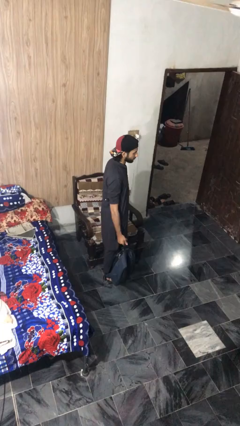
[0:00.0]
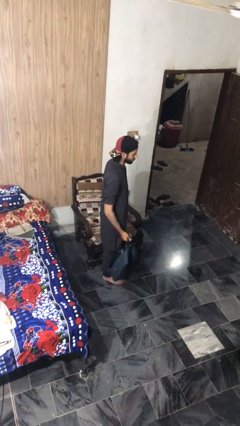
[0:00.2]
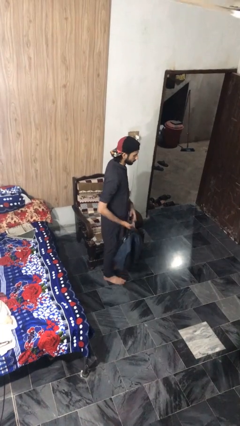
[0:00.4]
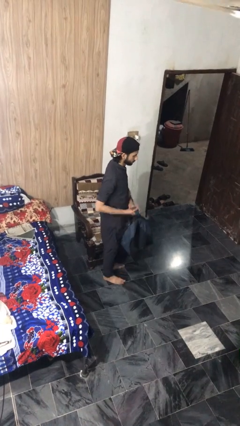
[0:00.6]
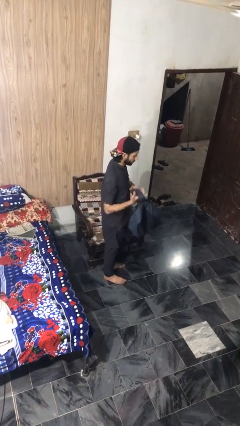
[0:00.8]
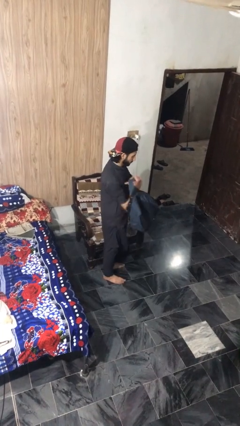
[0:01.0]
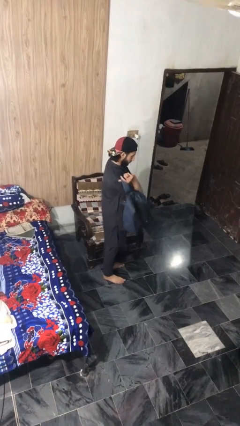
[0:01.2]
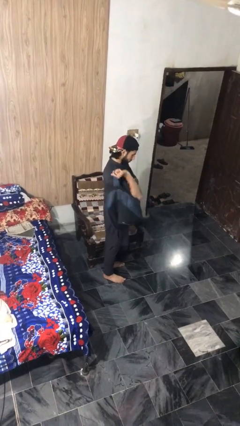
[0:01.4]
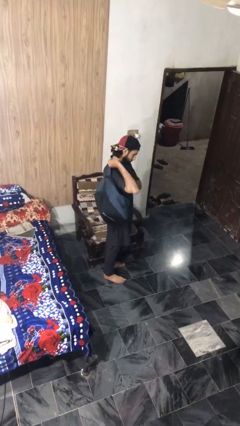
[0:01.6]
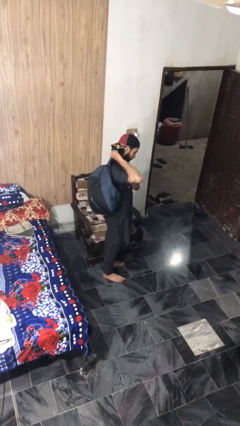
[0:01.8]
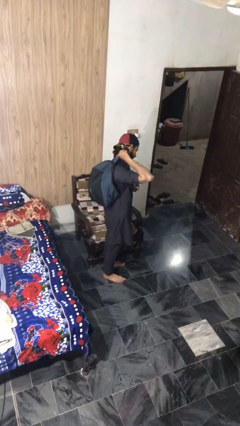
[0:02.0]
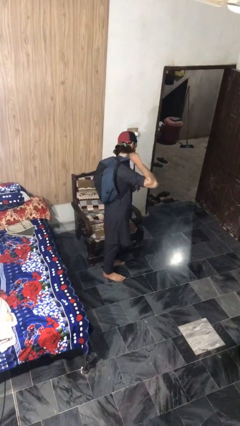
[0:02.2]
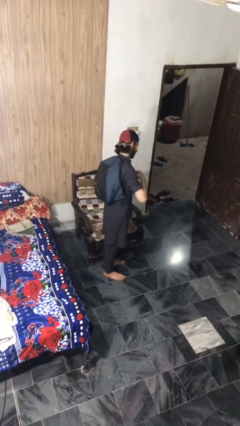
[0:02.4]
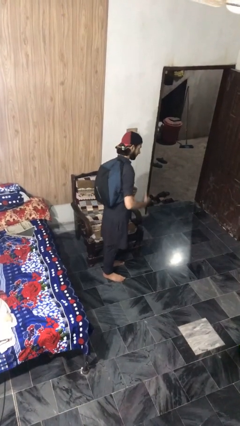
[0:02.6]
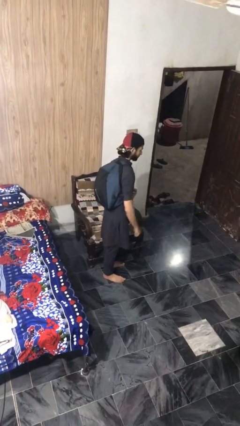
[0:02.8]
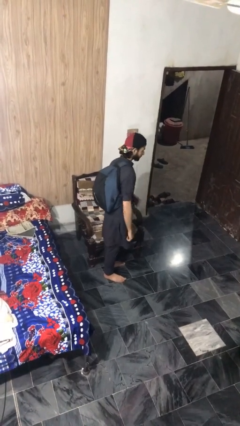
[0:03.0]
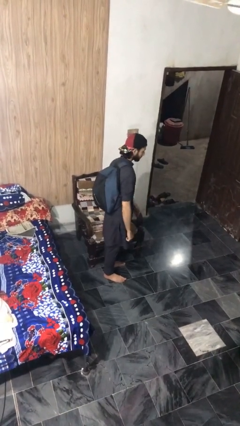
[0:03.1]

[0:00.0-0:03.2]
person puts on backpack

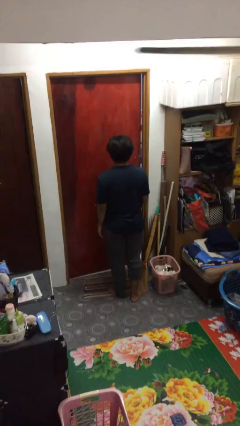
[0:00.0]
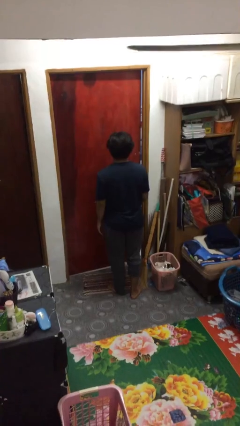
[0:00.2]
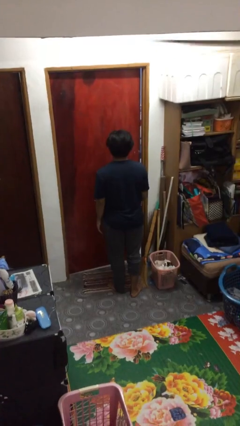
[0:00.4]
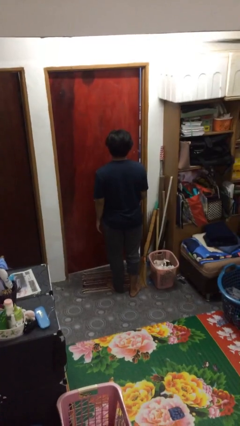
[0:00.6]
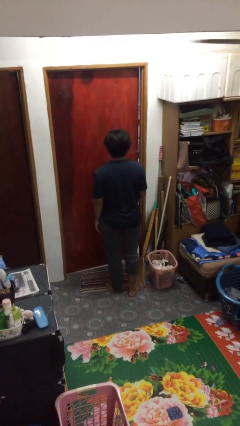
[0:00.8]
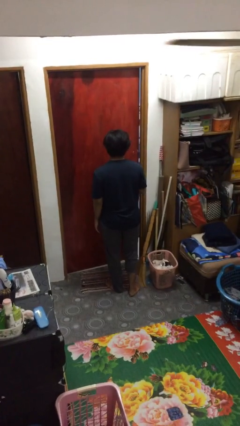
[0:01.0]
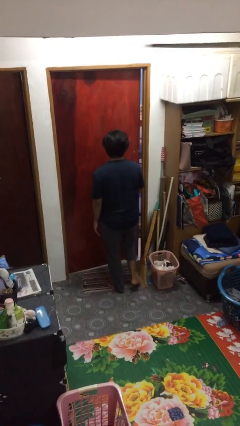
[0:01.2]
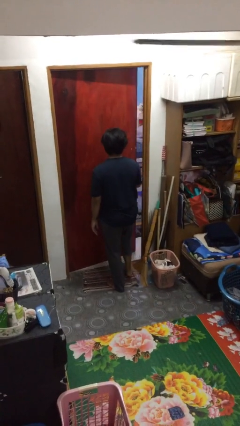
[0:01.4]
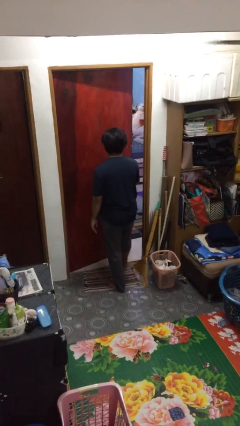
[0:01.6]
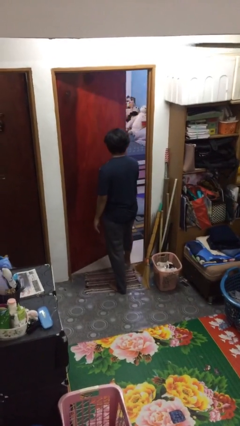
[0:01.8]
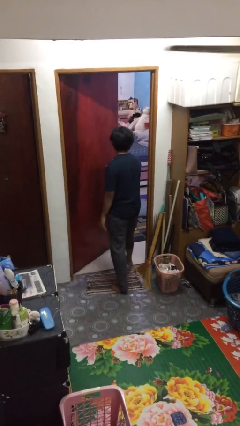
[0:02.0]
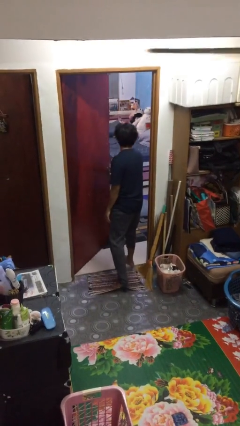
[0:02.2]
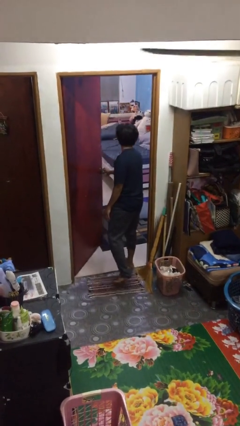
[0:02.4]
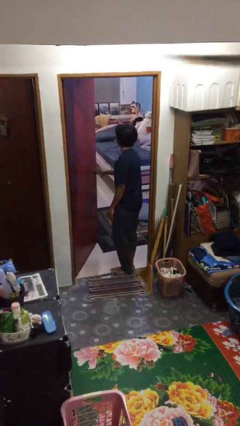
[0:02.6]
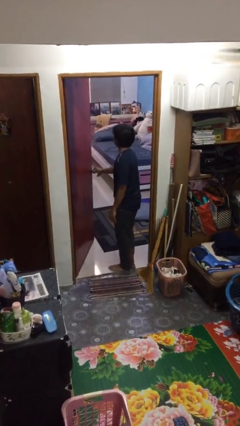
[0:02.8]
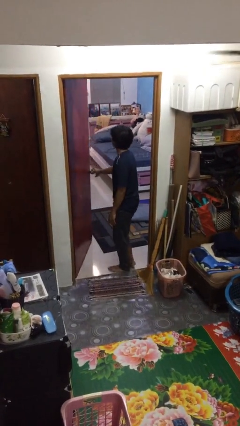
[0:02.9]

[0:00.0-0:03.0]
person opens facility door

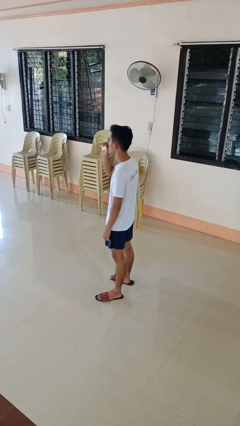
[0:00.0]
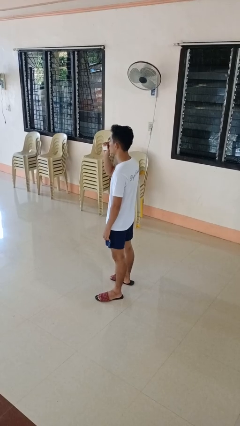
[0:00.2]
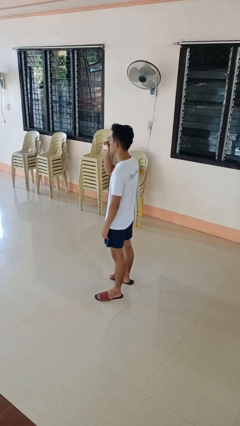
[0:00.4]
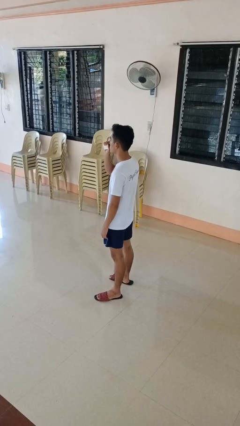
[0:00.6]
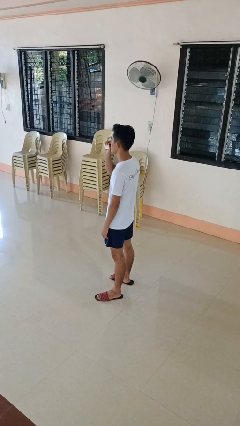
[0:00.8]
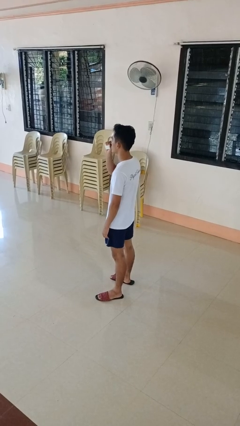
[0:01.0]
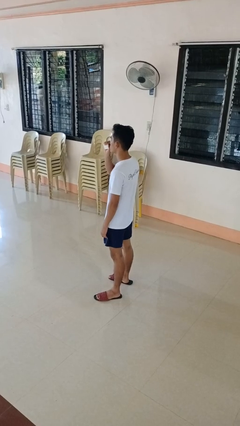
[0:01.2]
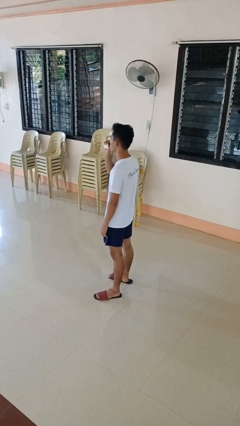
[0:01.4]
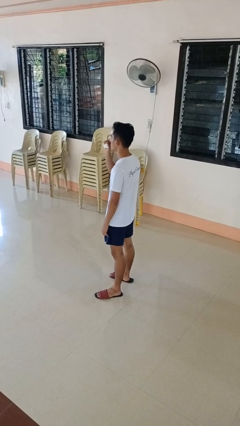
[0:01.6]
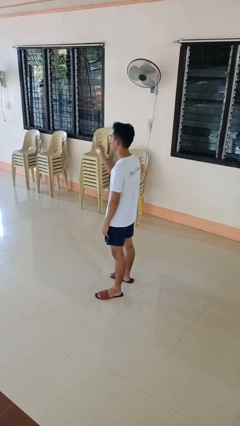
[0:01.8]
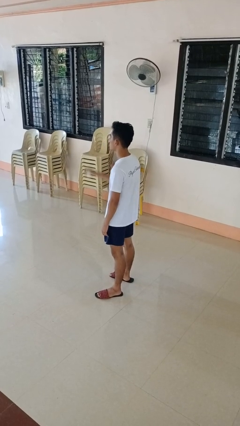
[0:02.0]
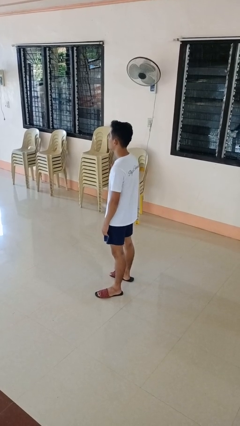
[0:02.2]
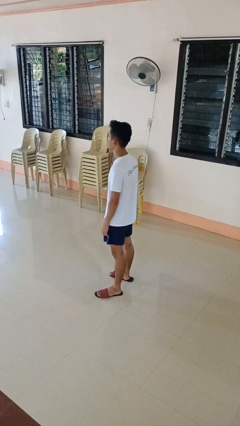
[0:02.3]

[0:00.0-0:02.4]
person vapes

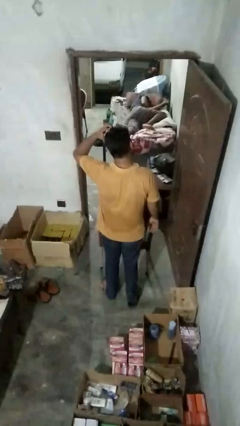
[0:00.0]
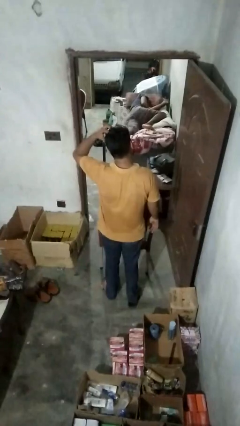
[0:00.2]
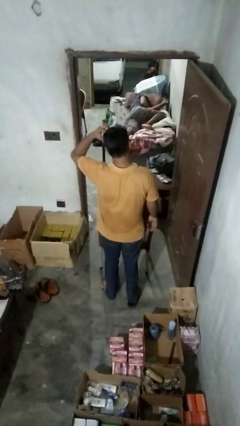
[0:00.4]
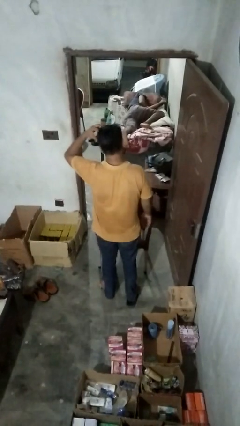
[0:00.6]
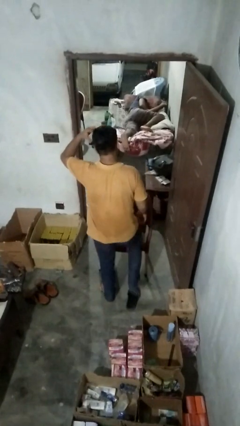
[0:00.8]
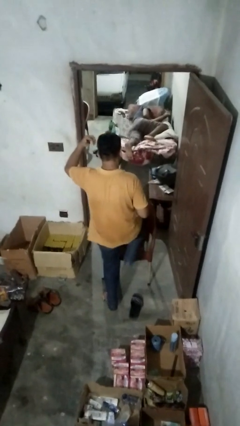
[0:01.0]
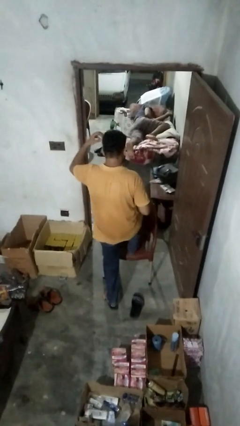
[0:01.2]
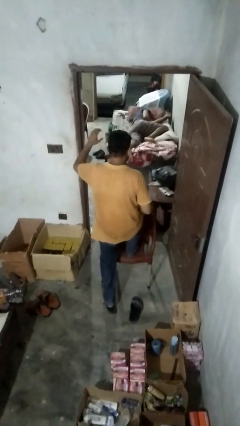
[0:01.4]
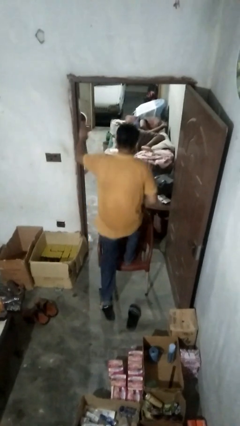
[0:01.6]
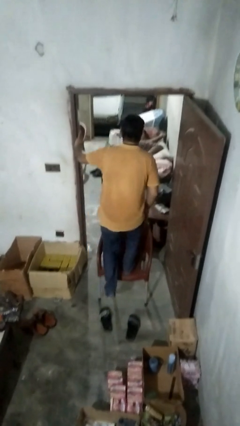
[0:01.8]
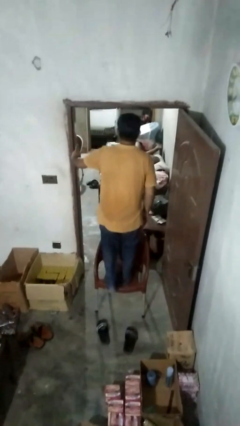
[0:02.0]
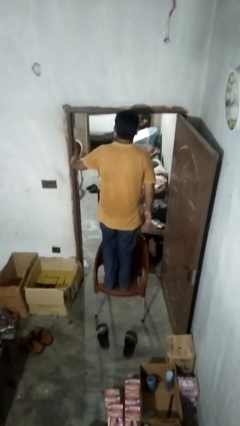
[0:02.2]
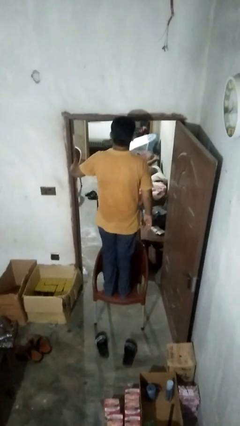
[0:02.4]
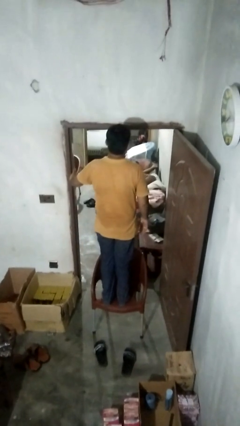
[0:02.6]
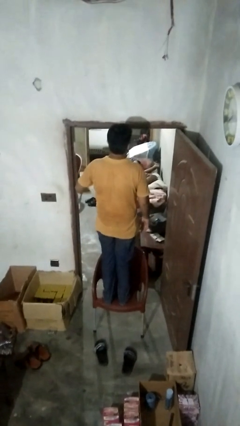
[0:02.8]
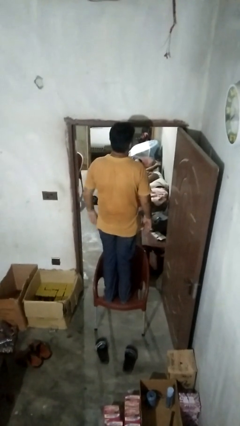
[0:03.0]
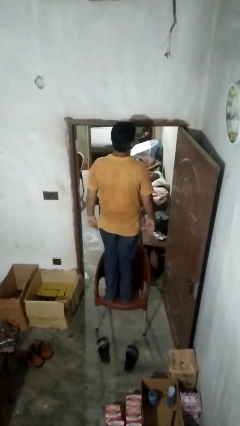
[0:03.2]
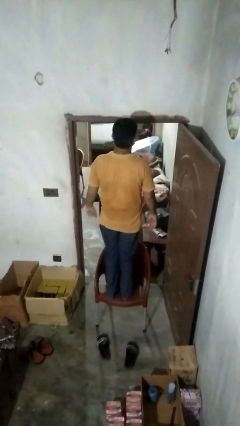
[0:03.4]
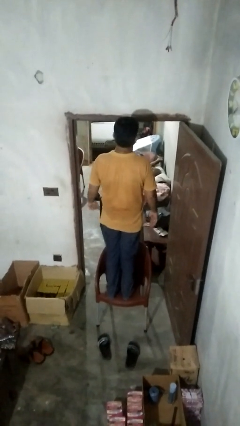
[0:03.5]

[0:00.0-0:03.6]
person climbs on chair

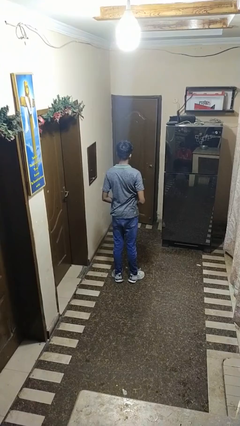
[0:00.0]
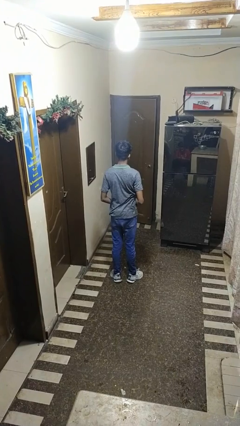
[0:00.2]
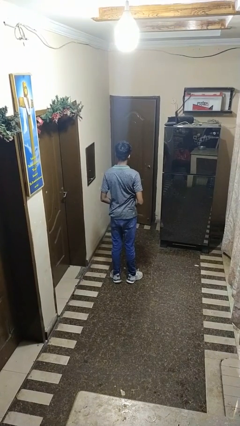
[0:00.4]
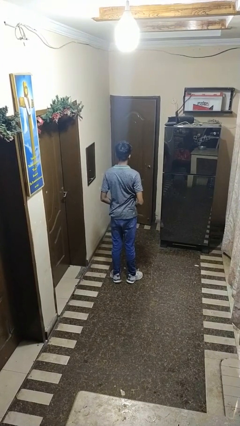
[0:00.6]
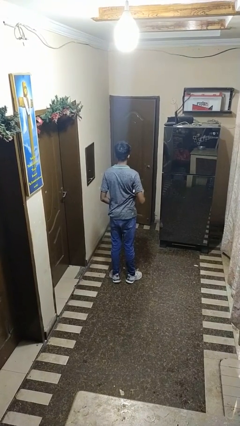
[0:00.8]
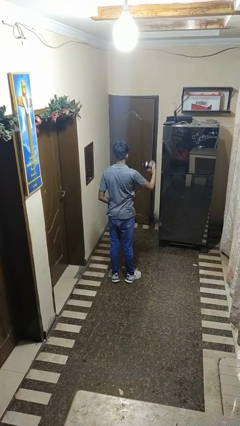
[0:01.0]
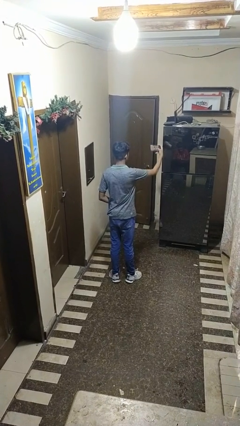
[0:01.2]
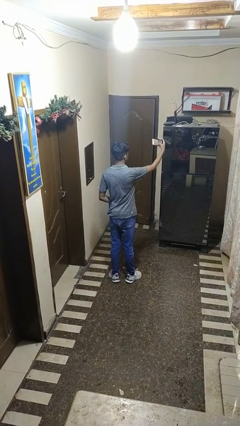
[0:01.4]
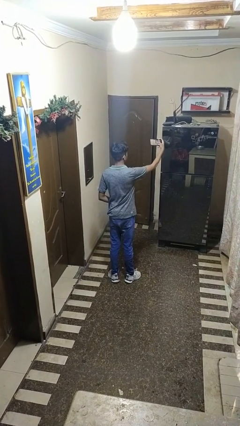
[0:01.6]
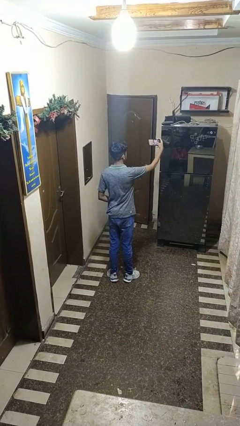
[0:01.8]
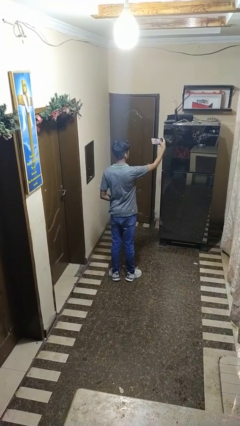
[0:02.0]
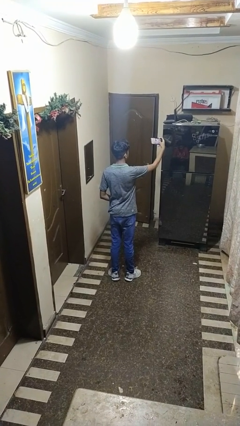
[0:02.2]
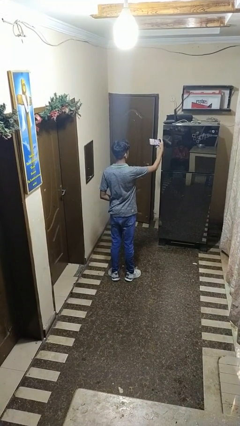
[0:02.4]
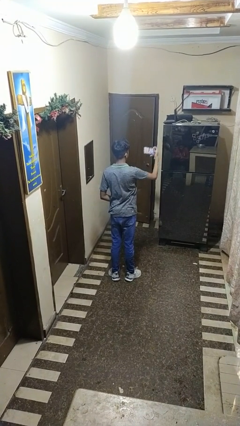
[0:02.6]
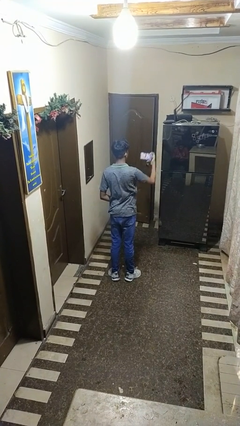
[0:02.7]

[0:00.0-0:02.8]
person takes selfie

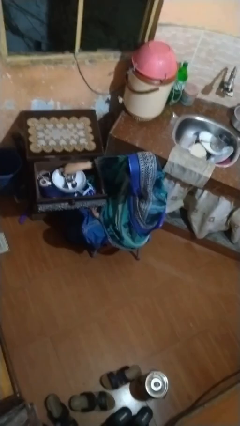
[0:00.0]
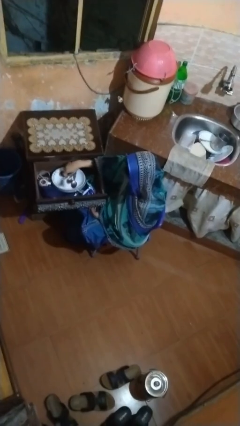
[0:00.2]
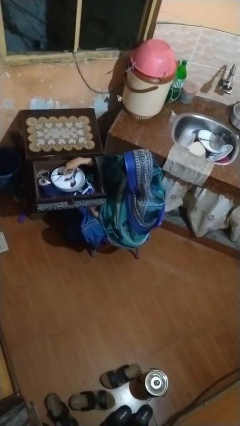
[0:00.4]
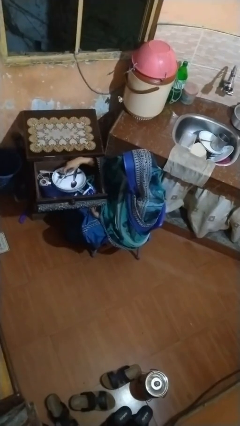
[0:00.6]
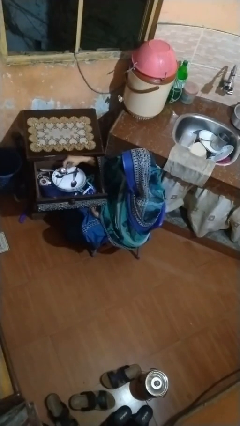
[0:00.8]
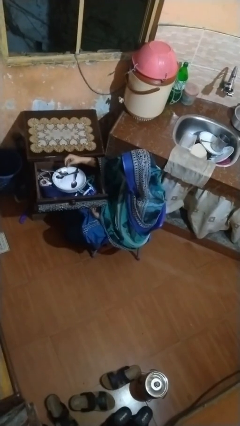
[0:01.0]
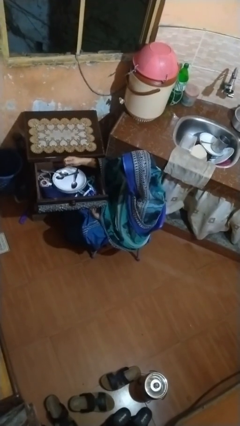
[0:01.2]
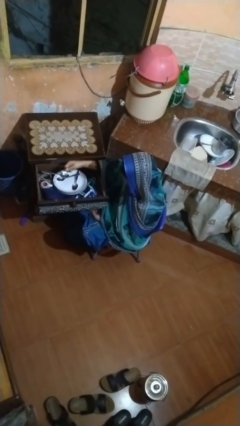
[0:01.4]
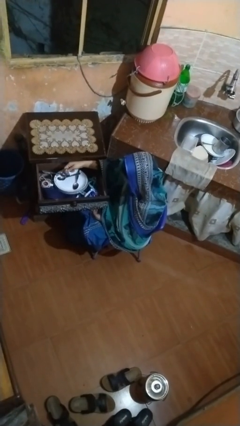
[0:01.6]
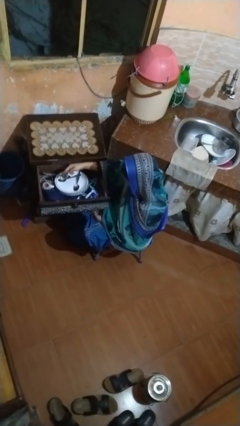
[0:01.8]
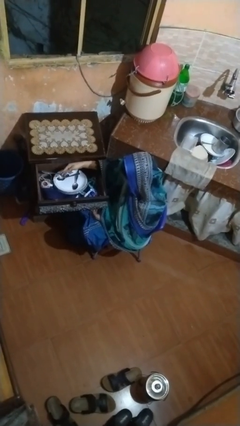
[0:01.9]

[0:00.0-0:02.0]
person takes object from kitchen drawer

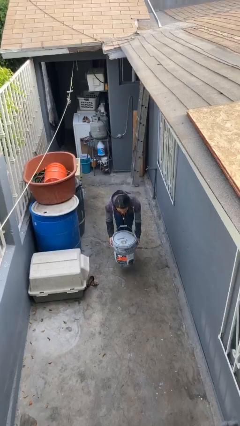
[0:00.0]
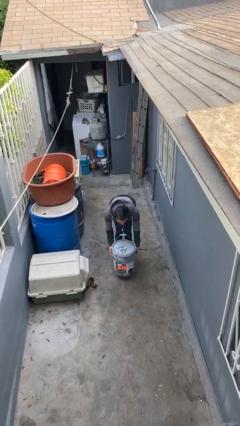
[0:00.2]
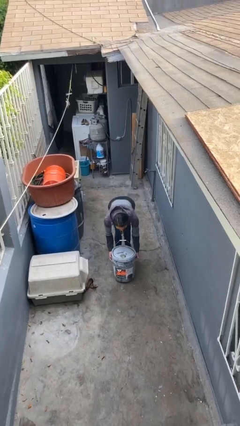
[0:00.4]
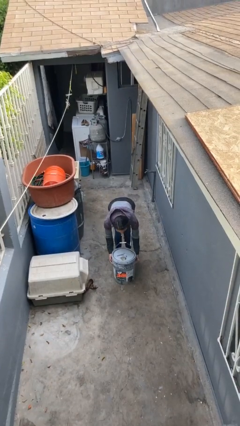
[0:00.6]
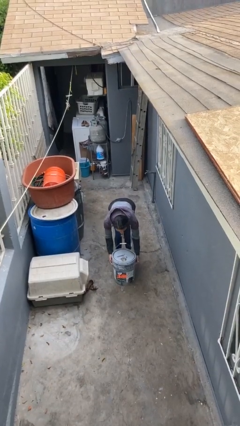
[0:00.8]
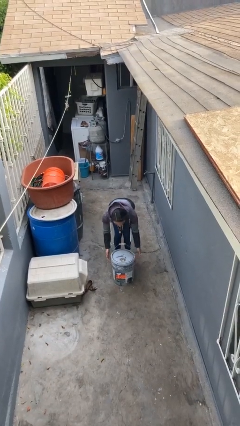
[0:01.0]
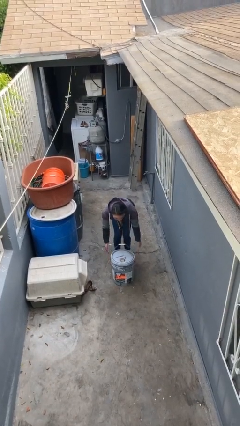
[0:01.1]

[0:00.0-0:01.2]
person puts down object on floor
